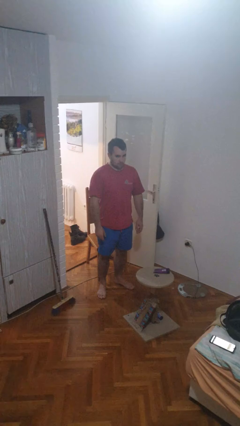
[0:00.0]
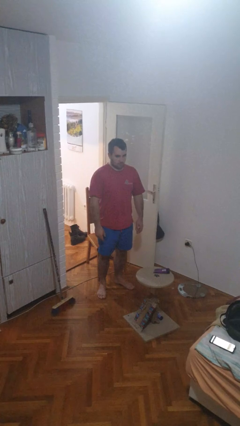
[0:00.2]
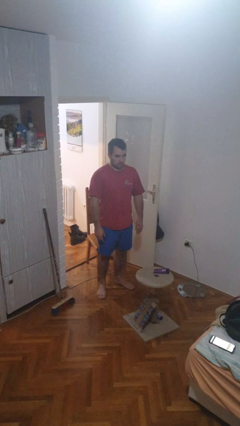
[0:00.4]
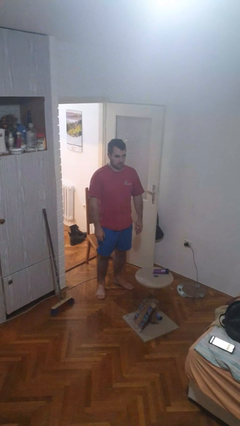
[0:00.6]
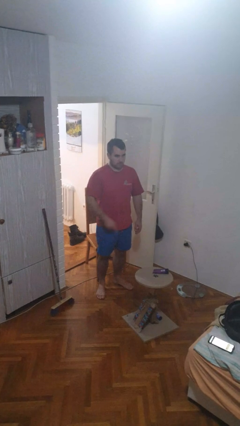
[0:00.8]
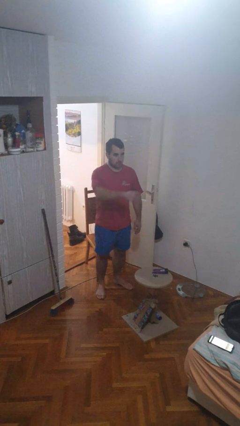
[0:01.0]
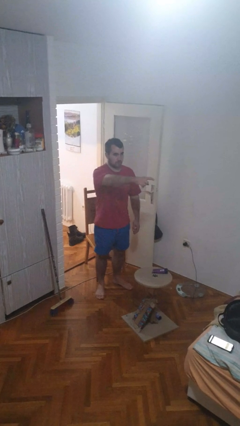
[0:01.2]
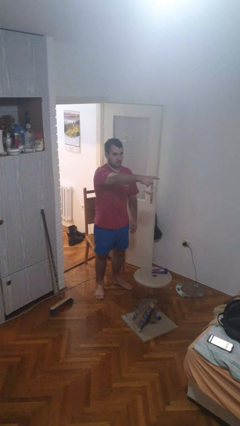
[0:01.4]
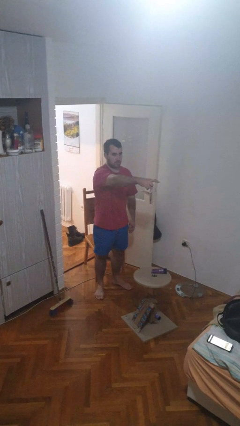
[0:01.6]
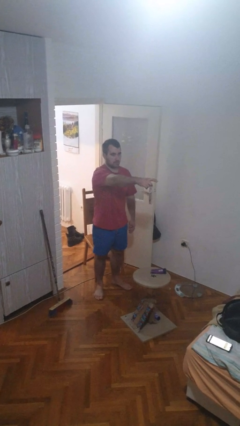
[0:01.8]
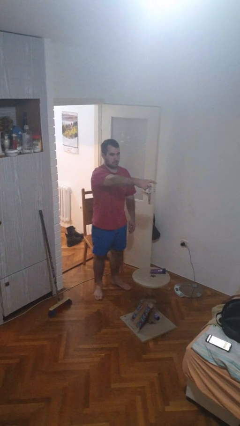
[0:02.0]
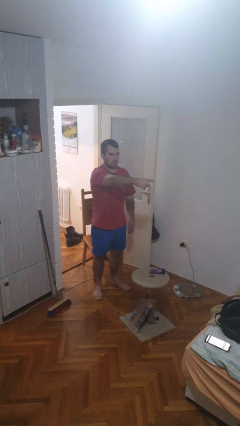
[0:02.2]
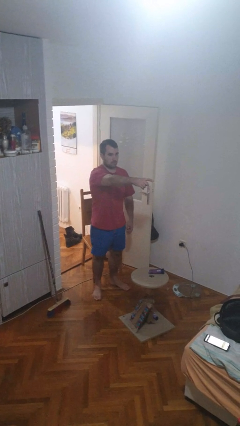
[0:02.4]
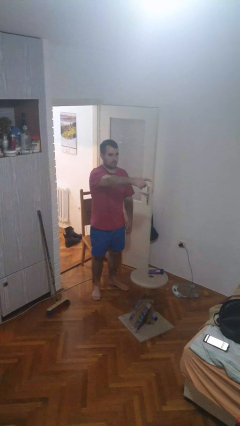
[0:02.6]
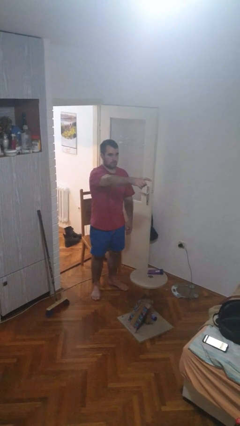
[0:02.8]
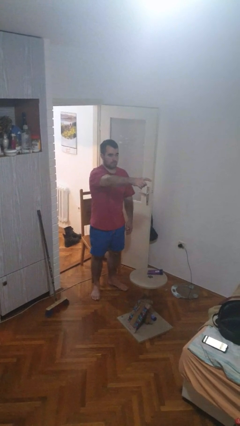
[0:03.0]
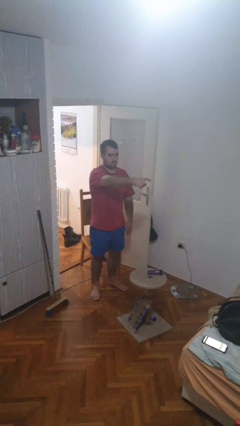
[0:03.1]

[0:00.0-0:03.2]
person points at person

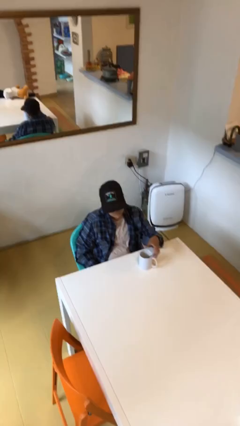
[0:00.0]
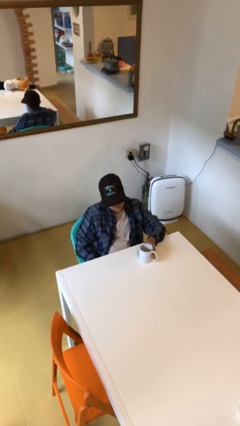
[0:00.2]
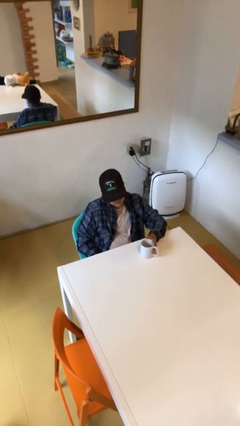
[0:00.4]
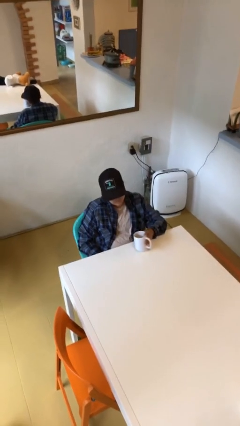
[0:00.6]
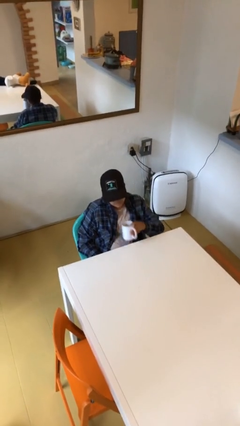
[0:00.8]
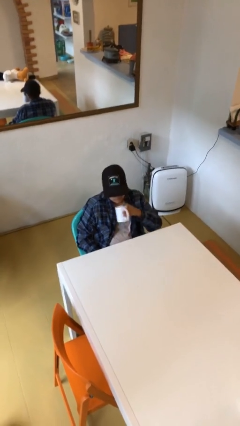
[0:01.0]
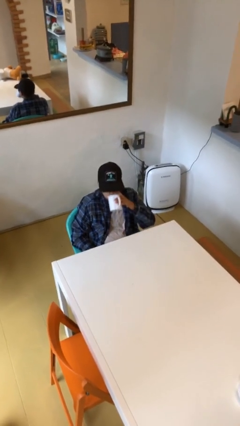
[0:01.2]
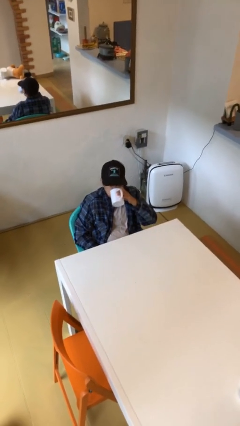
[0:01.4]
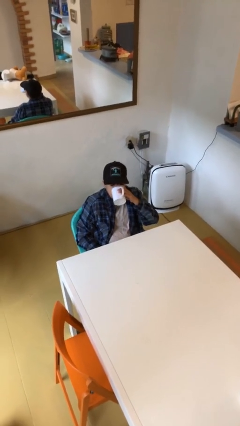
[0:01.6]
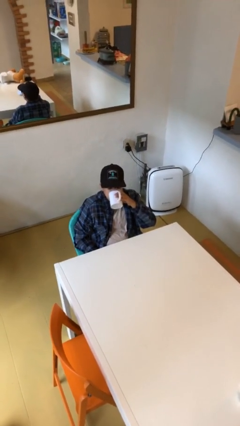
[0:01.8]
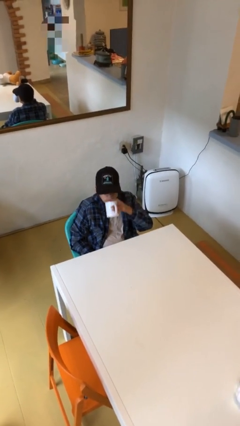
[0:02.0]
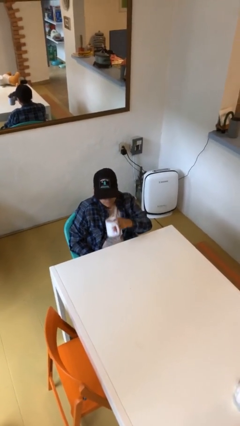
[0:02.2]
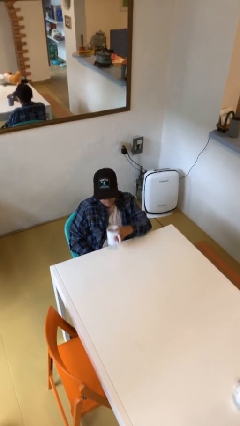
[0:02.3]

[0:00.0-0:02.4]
person drinks from mug

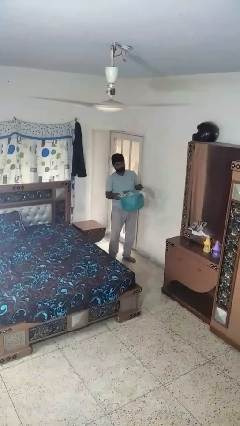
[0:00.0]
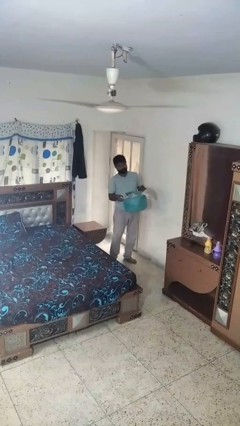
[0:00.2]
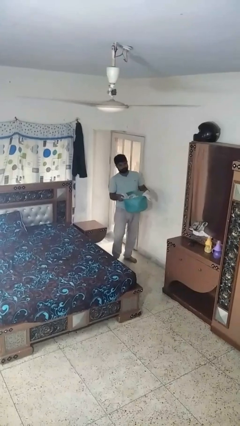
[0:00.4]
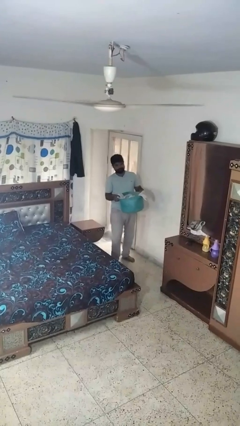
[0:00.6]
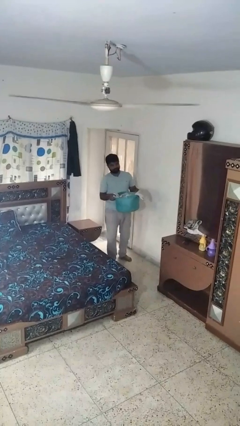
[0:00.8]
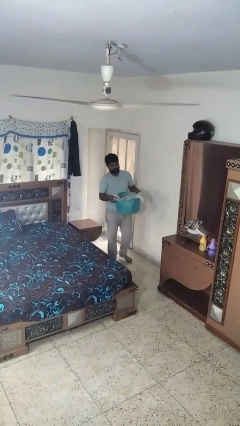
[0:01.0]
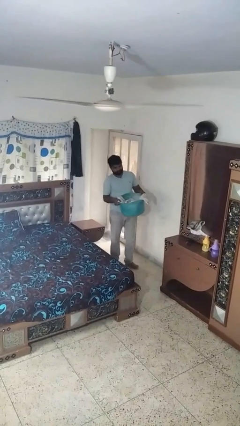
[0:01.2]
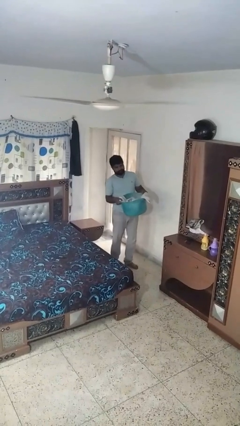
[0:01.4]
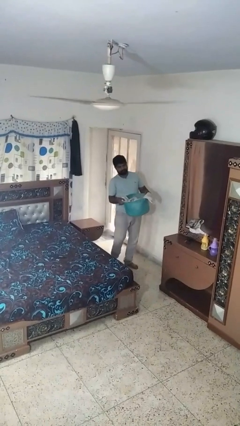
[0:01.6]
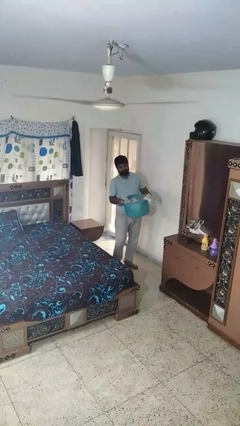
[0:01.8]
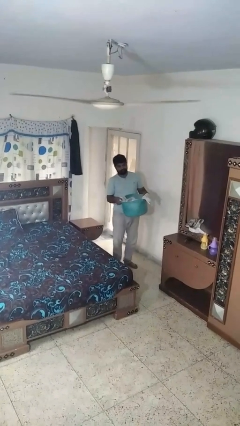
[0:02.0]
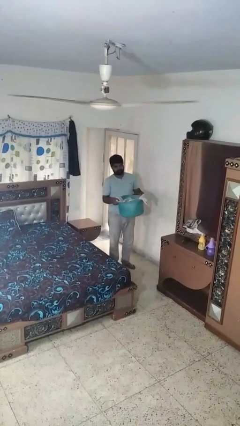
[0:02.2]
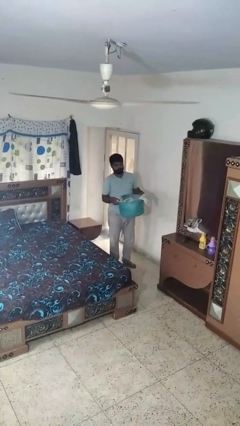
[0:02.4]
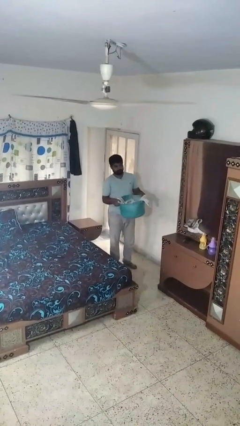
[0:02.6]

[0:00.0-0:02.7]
person carries laundry basket

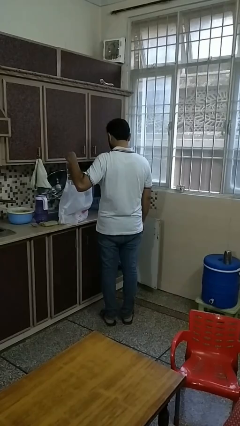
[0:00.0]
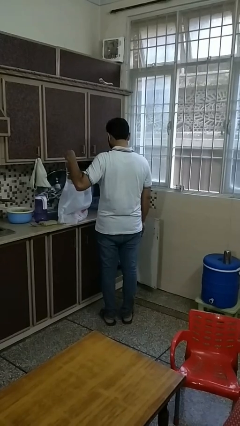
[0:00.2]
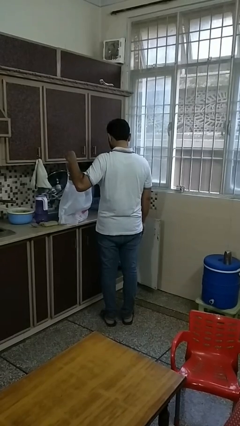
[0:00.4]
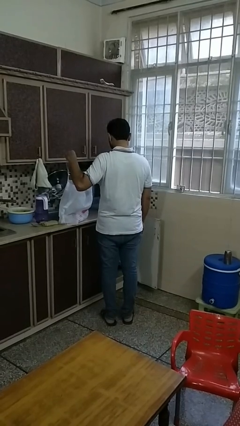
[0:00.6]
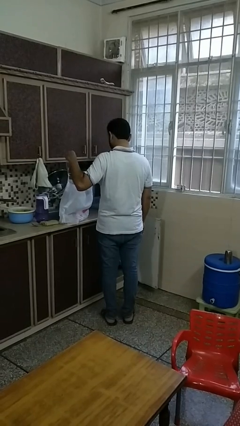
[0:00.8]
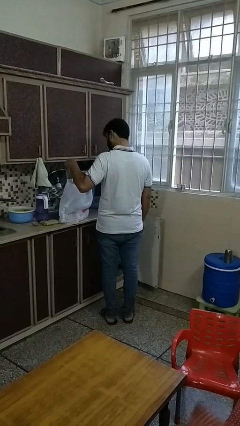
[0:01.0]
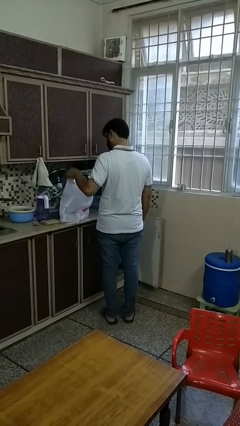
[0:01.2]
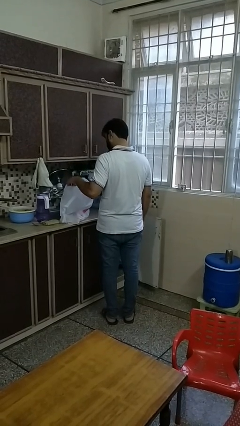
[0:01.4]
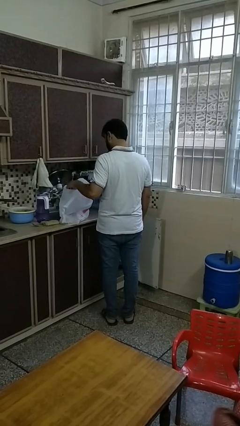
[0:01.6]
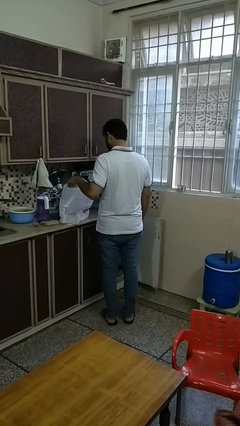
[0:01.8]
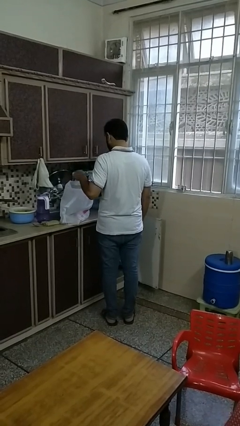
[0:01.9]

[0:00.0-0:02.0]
person puts object into bag

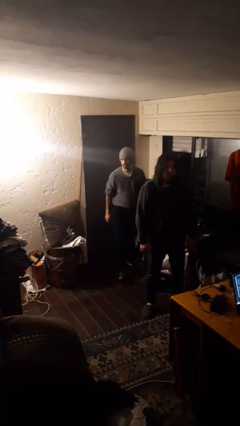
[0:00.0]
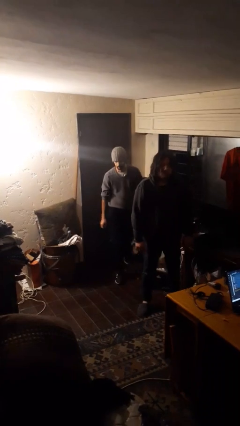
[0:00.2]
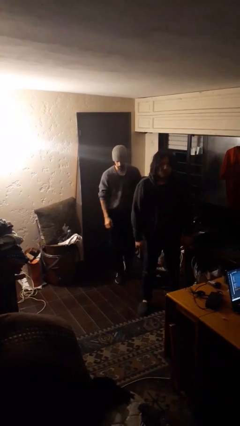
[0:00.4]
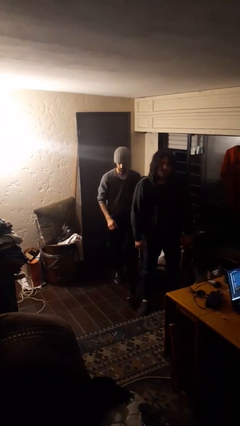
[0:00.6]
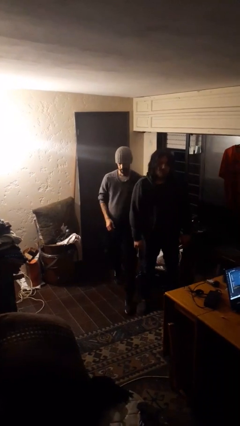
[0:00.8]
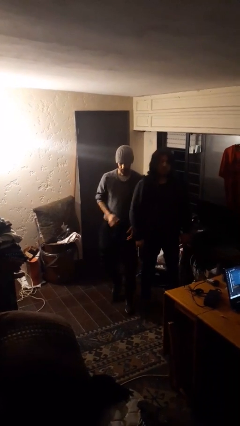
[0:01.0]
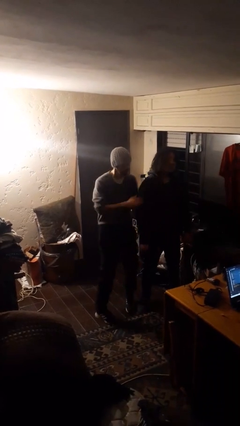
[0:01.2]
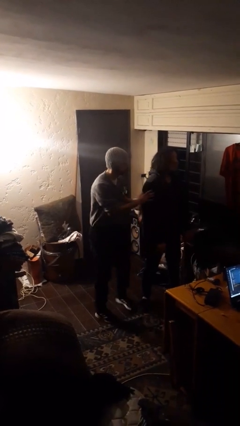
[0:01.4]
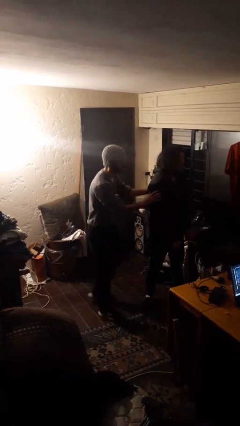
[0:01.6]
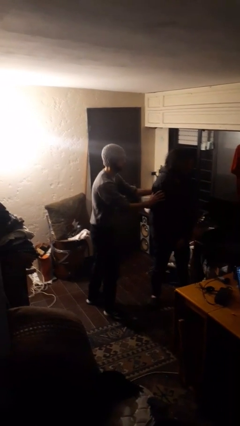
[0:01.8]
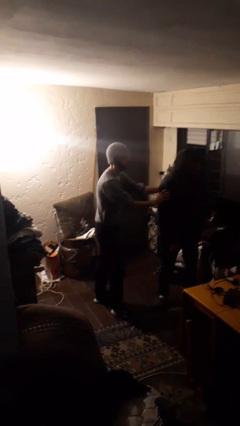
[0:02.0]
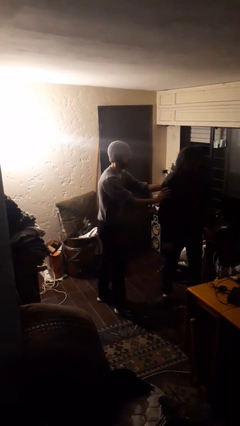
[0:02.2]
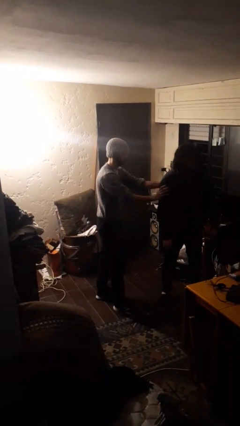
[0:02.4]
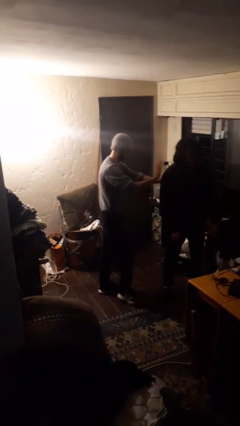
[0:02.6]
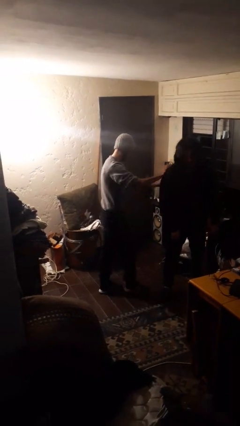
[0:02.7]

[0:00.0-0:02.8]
person bumps into person

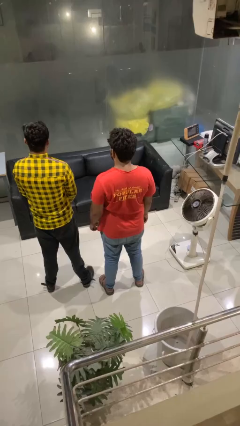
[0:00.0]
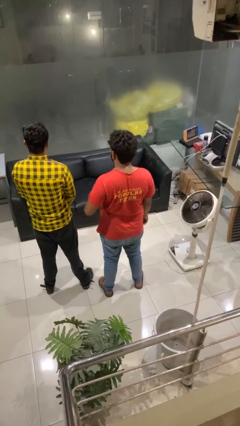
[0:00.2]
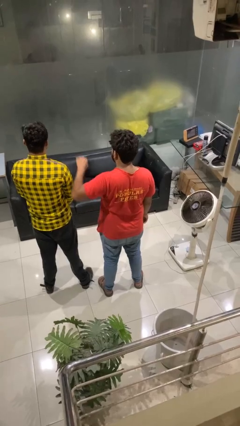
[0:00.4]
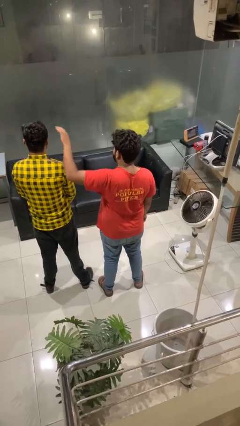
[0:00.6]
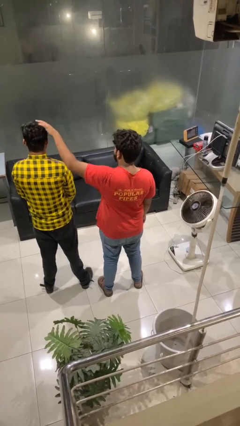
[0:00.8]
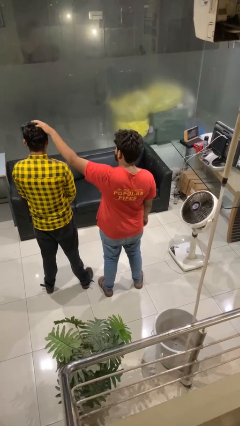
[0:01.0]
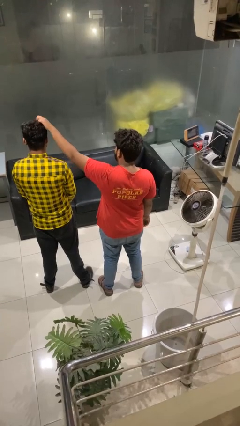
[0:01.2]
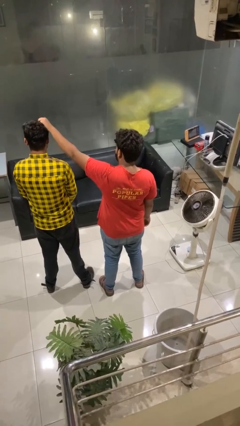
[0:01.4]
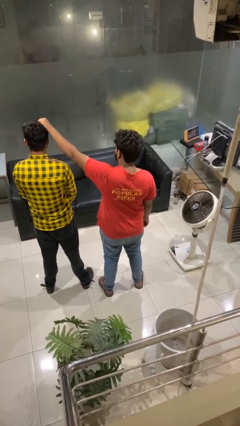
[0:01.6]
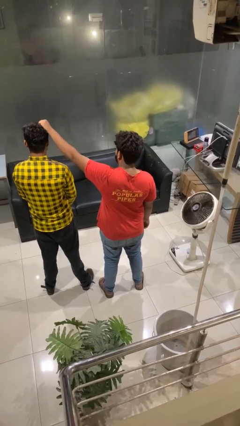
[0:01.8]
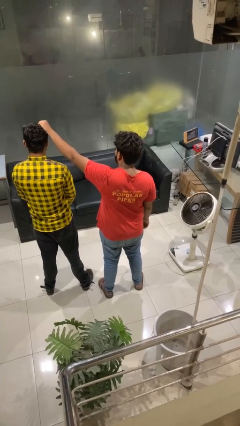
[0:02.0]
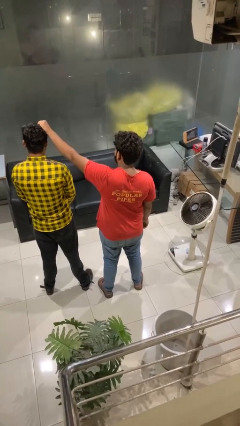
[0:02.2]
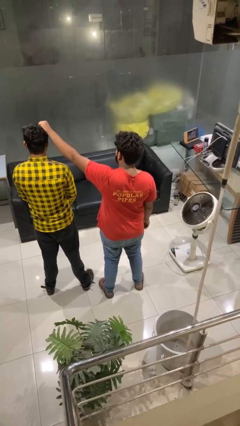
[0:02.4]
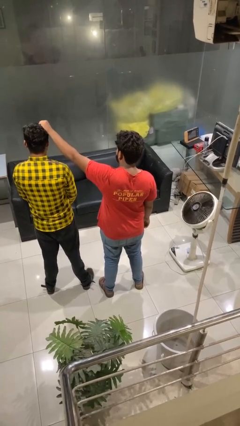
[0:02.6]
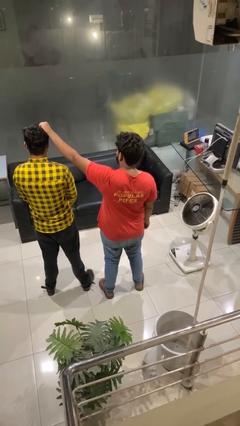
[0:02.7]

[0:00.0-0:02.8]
person grabs person by hair

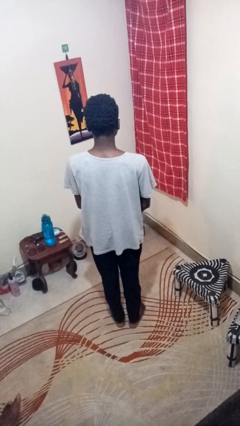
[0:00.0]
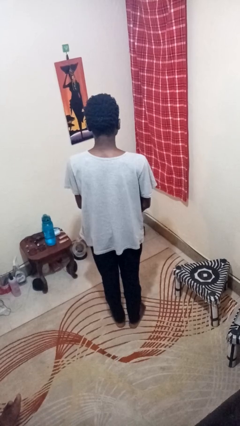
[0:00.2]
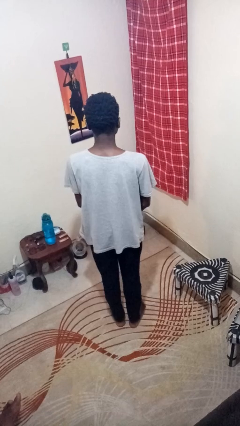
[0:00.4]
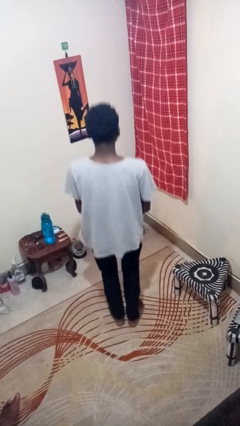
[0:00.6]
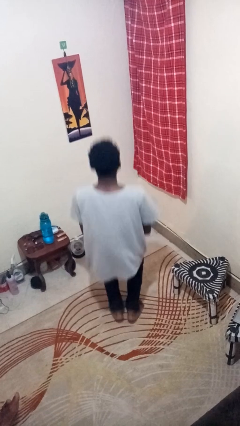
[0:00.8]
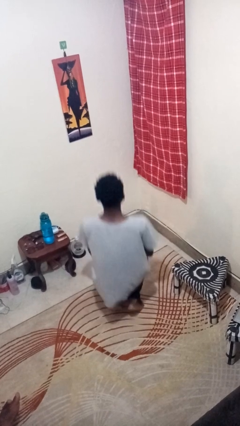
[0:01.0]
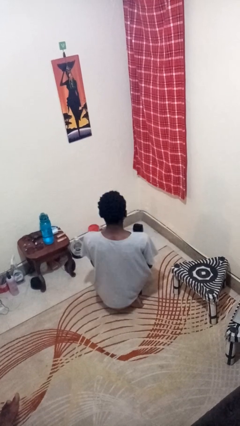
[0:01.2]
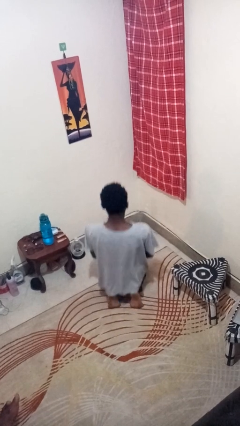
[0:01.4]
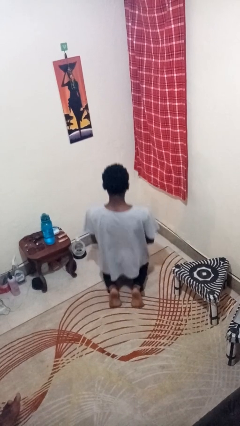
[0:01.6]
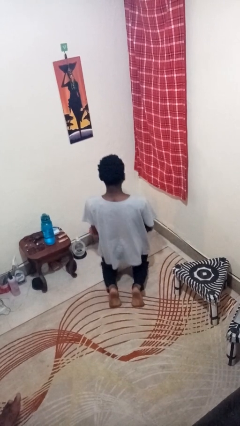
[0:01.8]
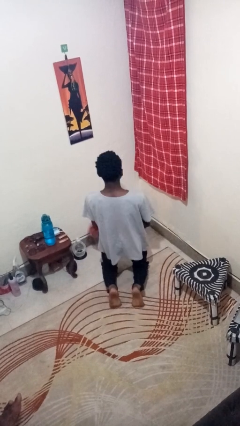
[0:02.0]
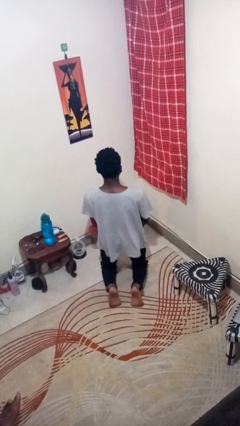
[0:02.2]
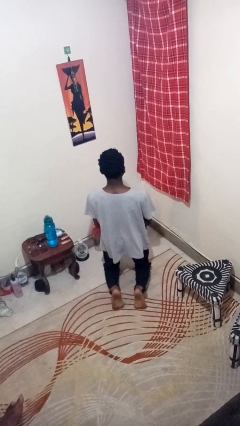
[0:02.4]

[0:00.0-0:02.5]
person kneels
